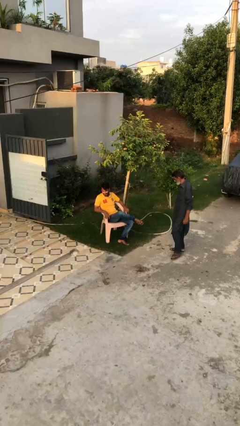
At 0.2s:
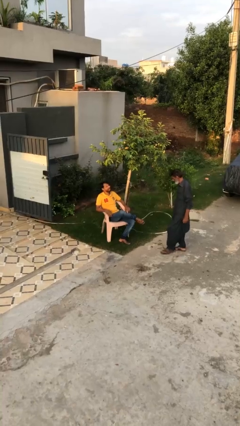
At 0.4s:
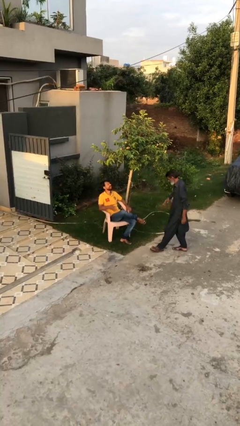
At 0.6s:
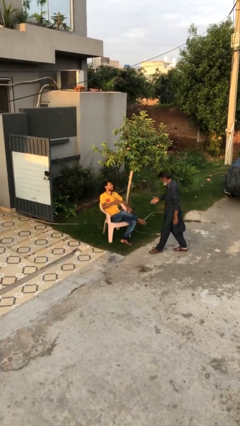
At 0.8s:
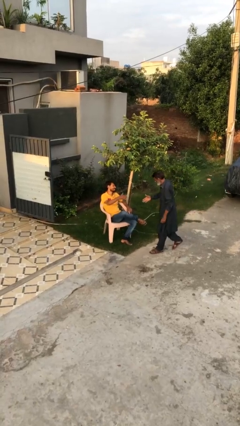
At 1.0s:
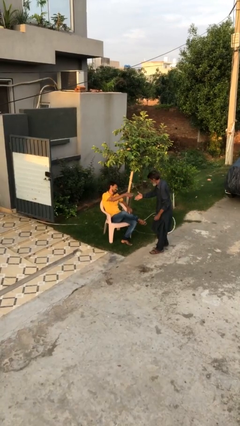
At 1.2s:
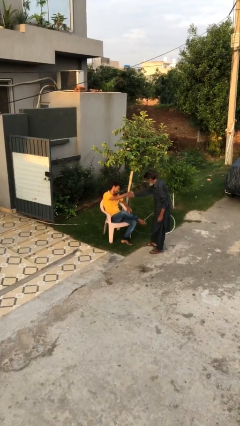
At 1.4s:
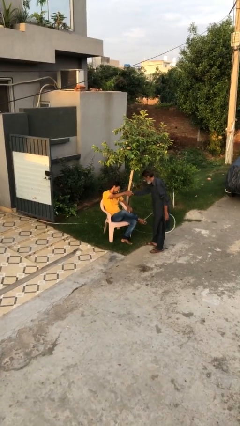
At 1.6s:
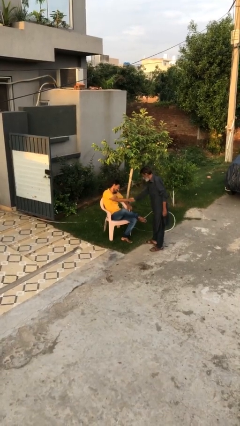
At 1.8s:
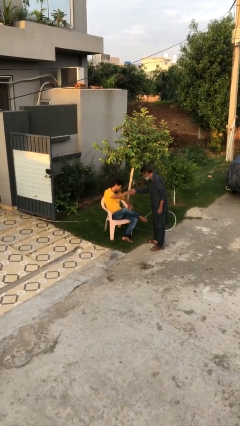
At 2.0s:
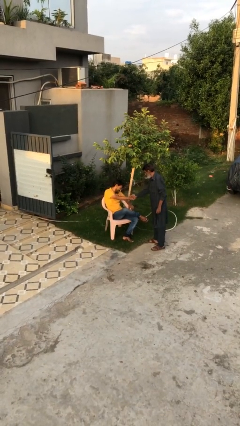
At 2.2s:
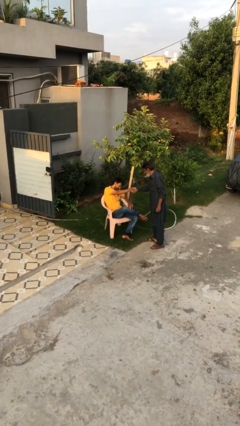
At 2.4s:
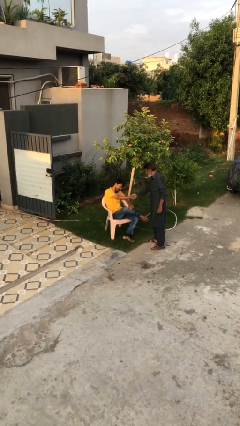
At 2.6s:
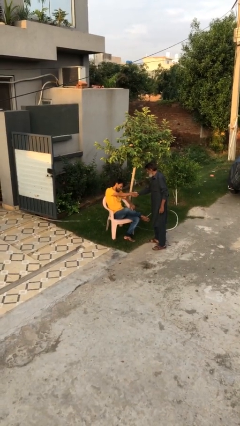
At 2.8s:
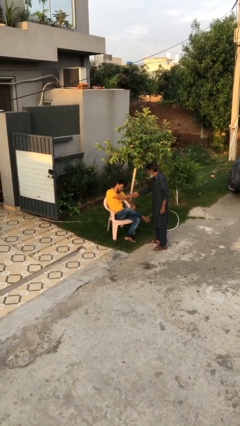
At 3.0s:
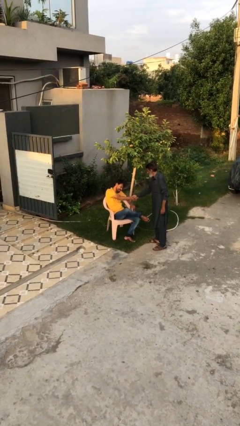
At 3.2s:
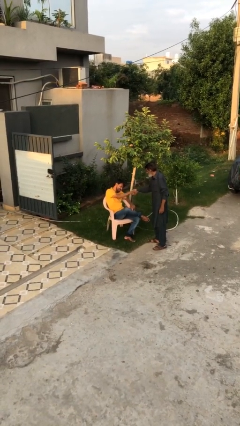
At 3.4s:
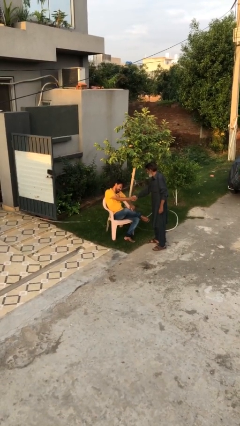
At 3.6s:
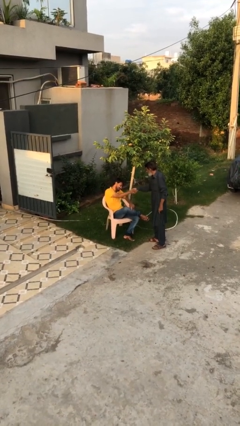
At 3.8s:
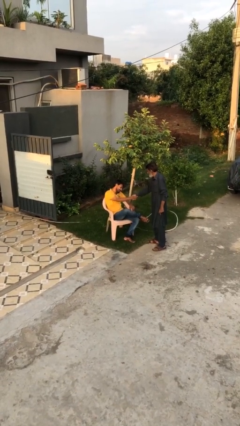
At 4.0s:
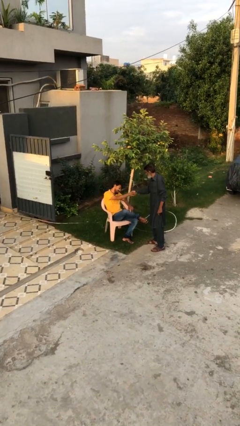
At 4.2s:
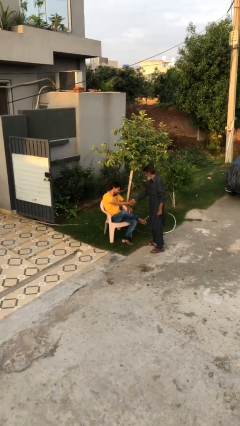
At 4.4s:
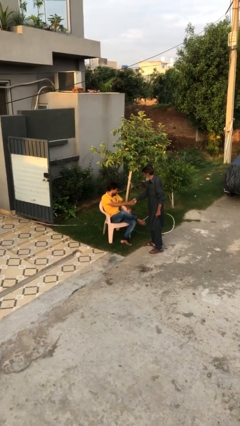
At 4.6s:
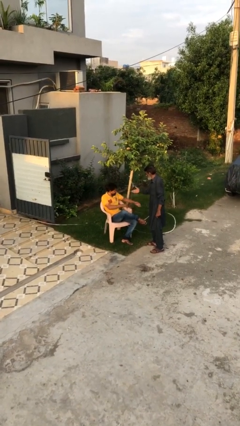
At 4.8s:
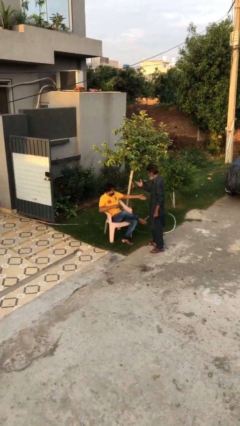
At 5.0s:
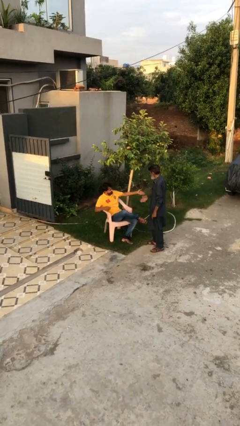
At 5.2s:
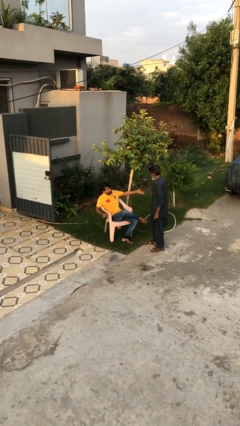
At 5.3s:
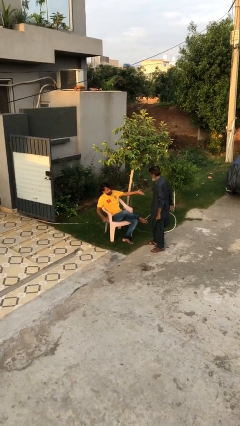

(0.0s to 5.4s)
person shakes hand

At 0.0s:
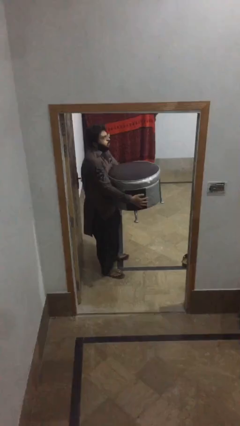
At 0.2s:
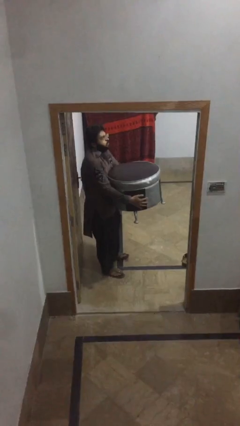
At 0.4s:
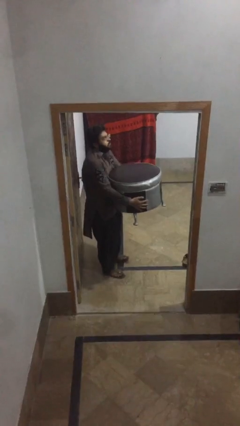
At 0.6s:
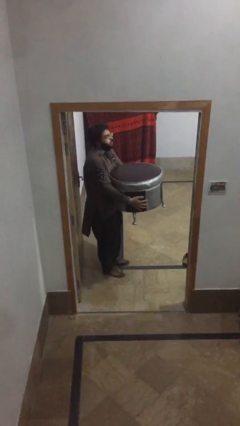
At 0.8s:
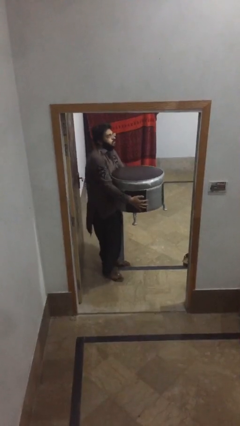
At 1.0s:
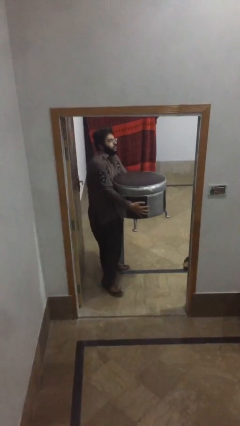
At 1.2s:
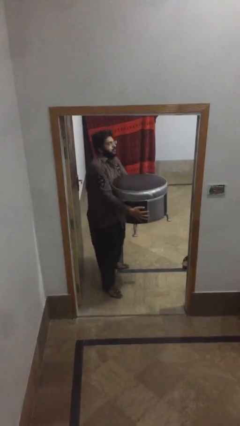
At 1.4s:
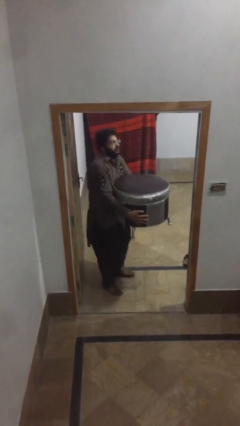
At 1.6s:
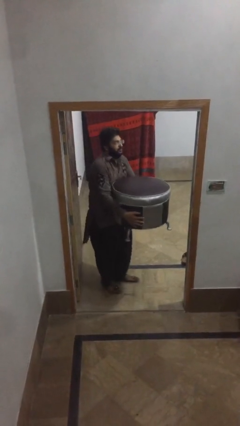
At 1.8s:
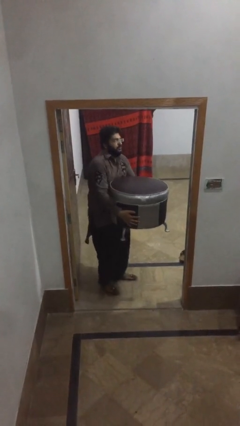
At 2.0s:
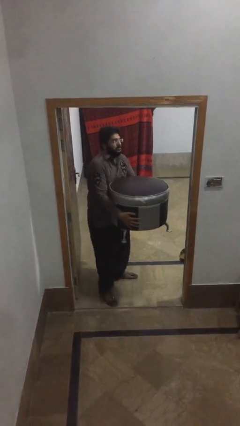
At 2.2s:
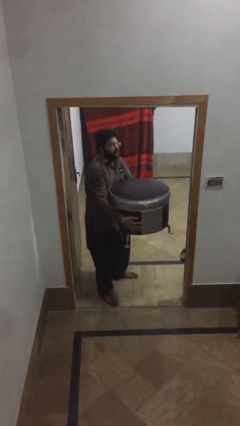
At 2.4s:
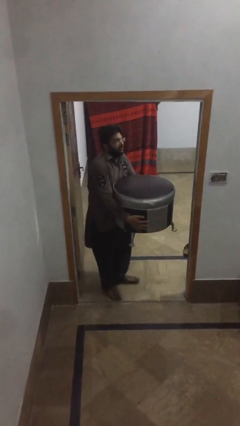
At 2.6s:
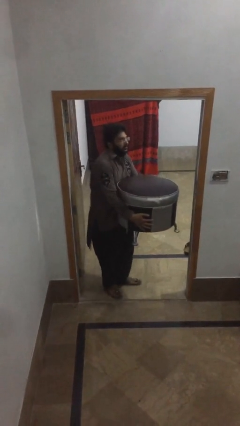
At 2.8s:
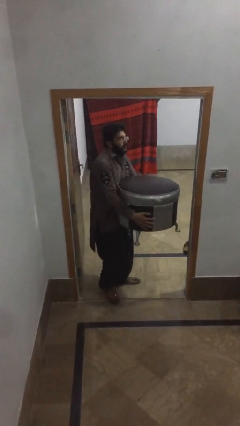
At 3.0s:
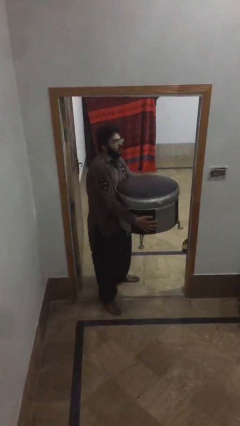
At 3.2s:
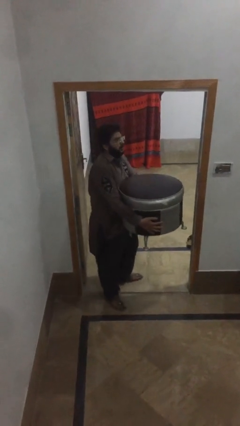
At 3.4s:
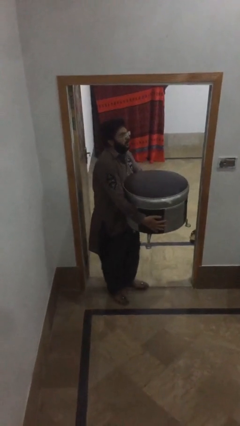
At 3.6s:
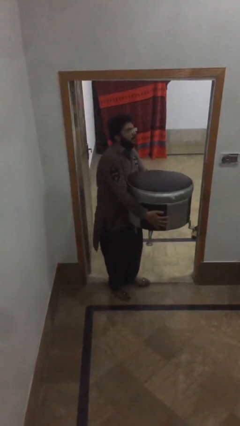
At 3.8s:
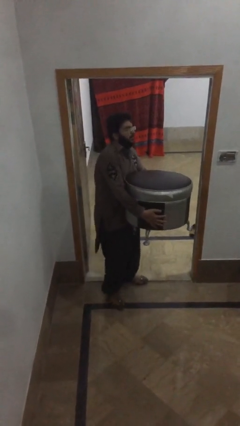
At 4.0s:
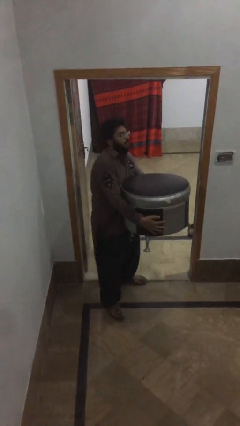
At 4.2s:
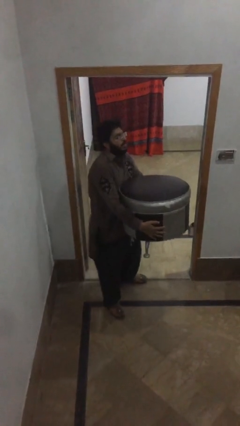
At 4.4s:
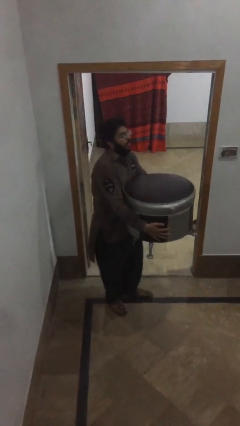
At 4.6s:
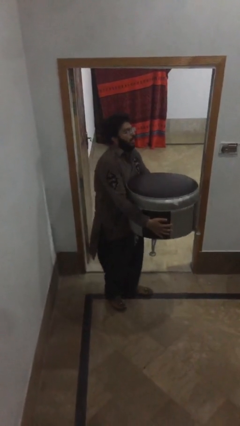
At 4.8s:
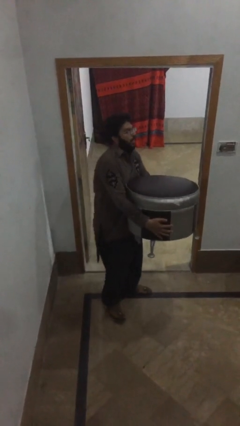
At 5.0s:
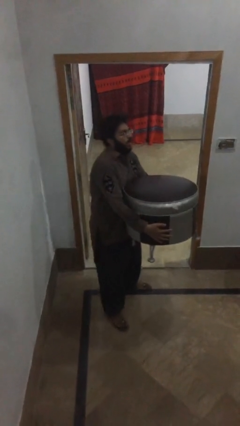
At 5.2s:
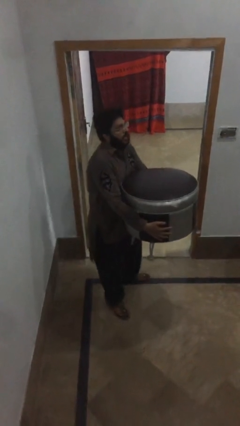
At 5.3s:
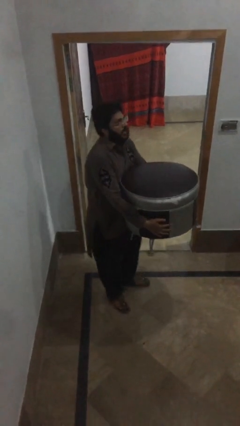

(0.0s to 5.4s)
person carries heavy object

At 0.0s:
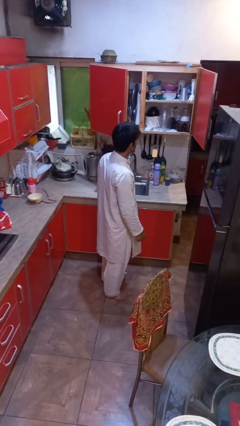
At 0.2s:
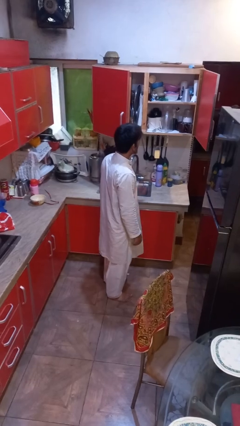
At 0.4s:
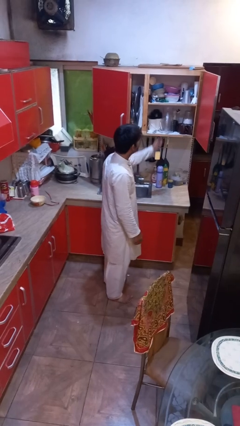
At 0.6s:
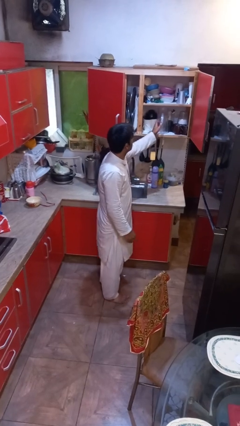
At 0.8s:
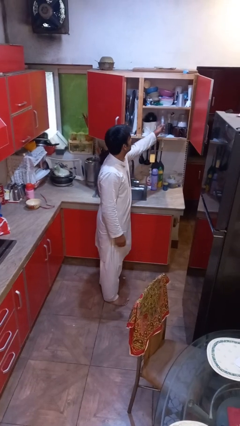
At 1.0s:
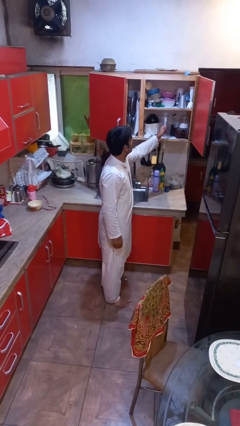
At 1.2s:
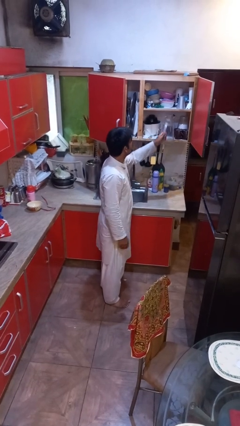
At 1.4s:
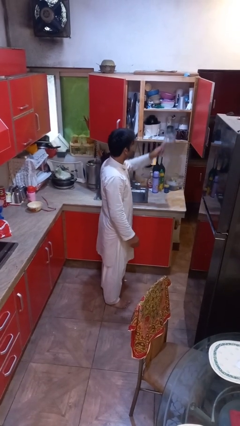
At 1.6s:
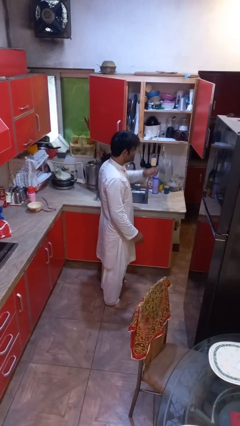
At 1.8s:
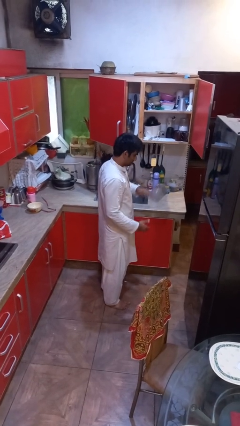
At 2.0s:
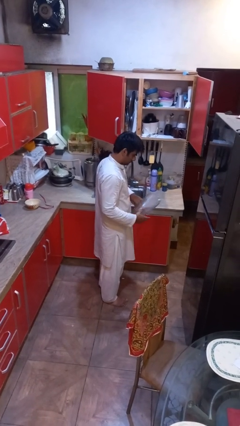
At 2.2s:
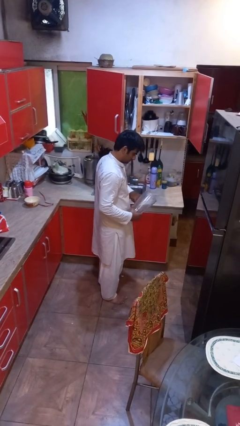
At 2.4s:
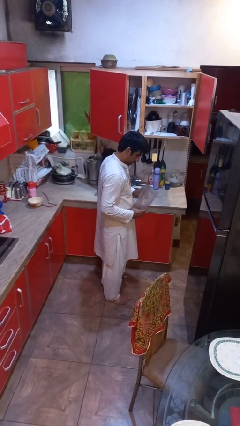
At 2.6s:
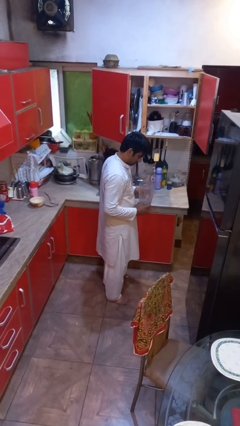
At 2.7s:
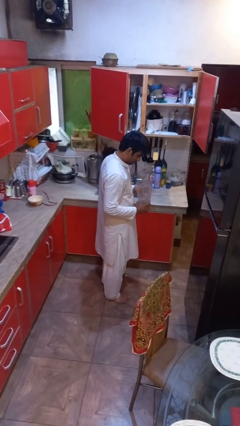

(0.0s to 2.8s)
person picks up object from cabinet

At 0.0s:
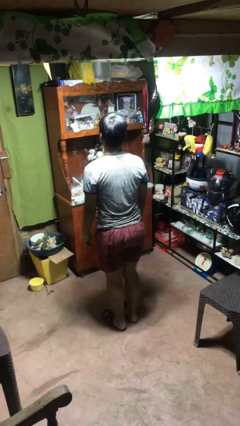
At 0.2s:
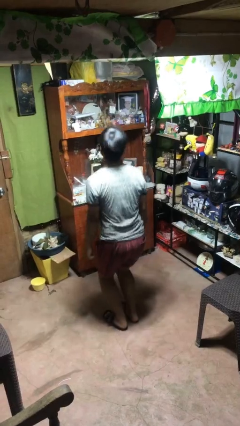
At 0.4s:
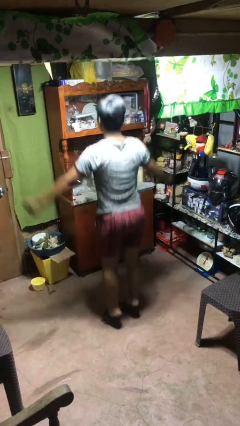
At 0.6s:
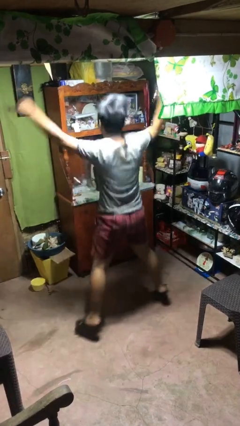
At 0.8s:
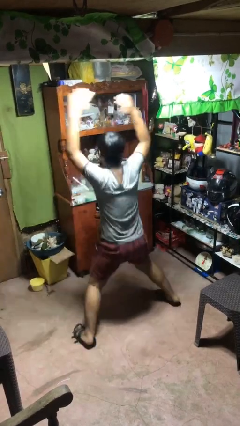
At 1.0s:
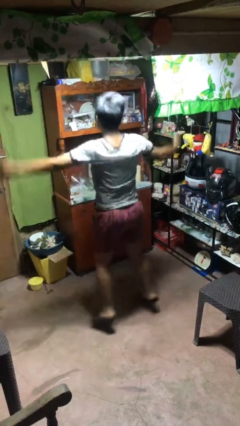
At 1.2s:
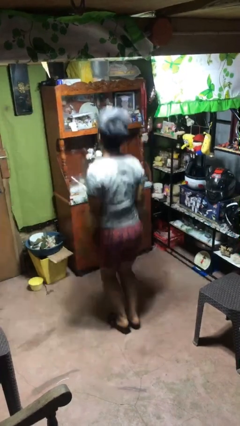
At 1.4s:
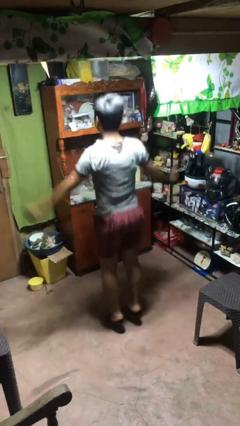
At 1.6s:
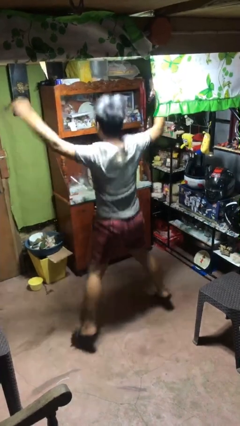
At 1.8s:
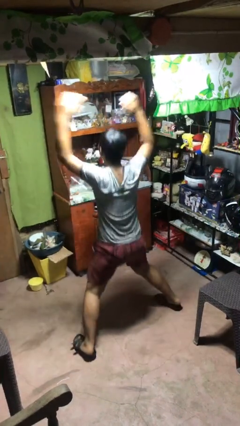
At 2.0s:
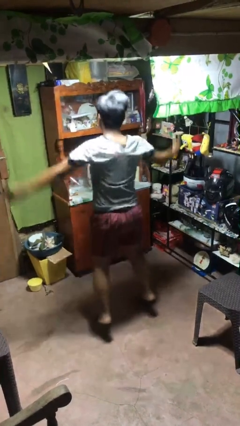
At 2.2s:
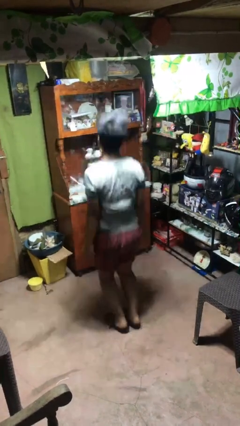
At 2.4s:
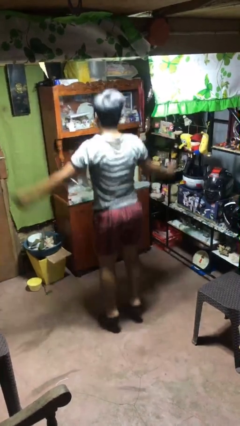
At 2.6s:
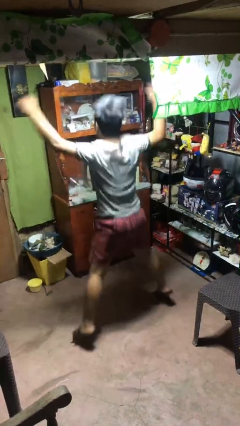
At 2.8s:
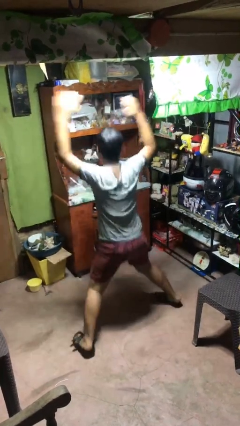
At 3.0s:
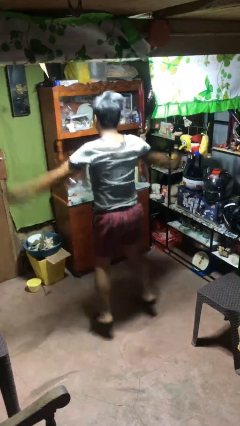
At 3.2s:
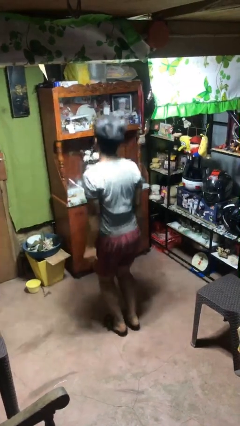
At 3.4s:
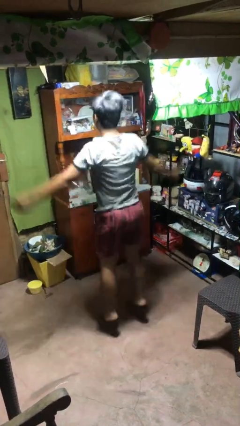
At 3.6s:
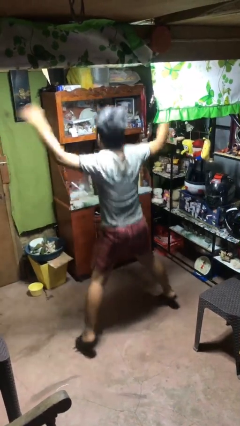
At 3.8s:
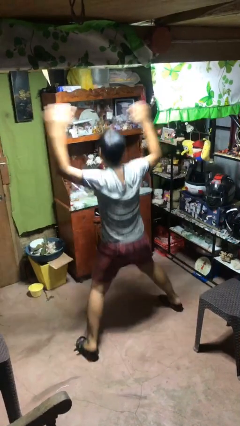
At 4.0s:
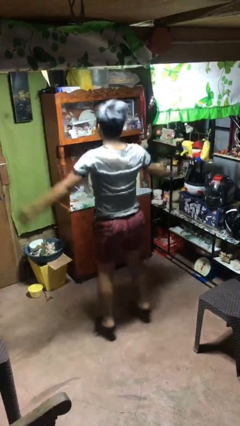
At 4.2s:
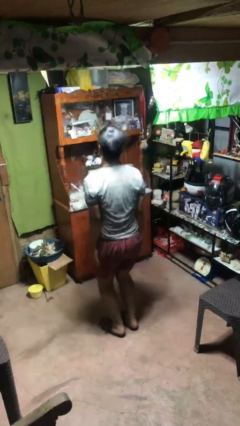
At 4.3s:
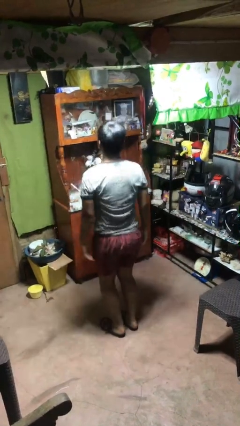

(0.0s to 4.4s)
person exercises with jumping jacks
